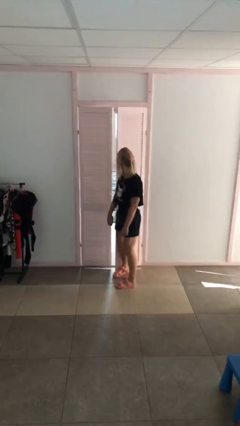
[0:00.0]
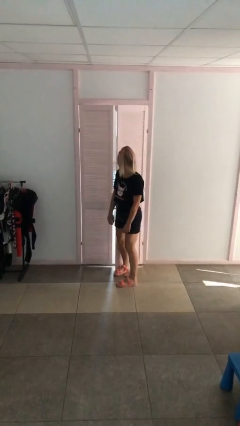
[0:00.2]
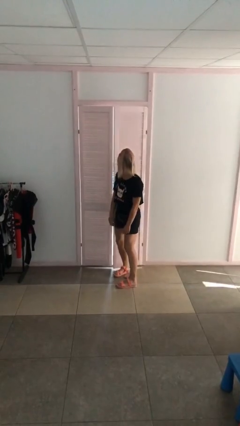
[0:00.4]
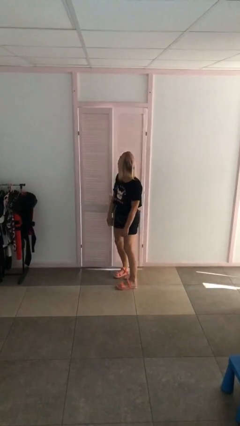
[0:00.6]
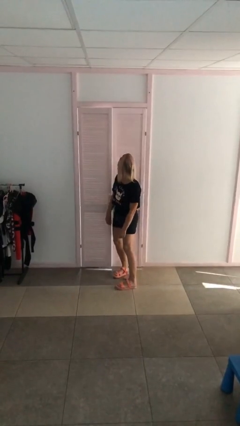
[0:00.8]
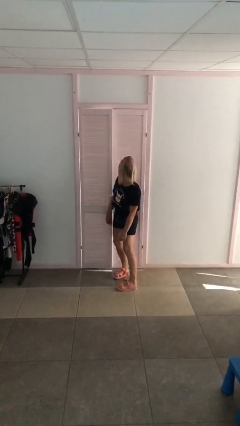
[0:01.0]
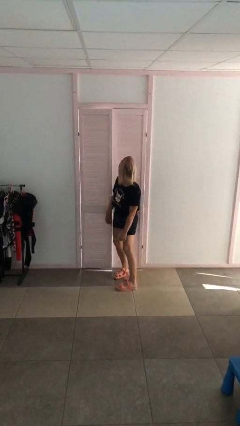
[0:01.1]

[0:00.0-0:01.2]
person closes door with hip

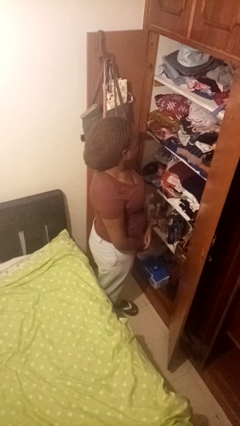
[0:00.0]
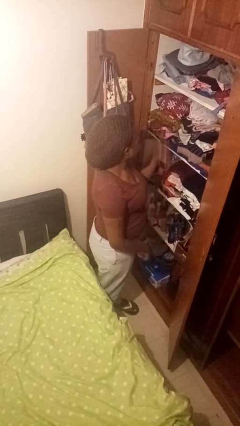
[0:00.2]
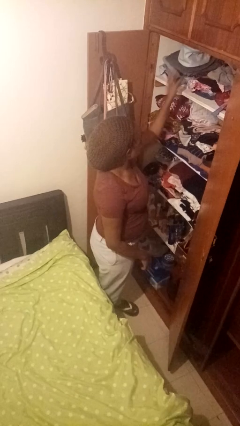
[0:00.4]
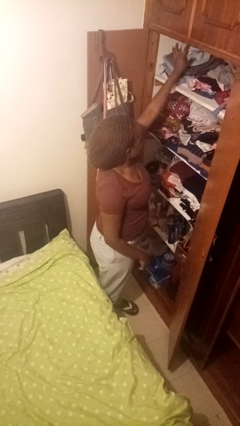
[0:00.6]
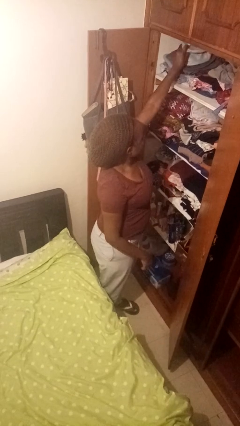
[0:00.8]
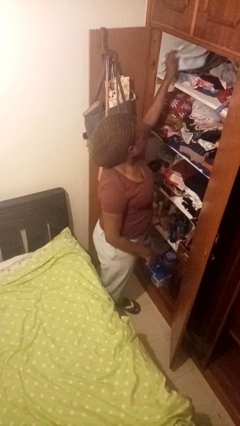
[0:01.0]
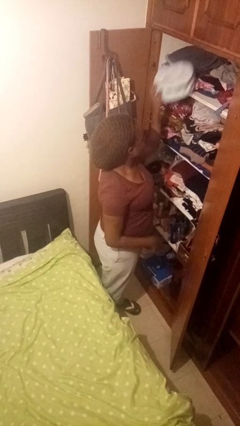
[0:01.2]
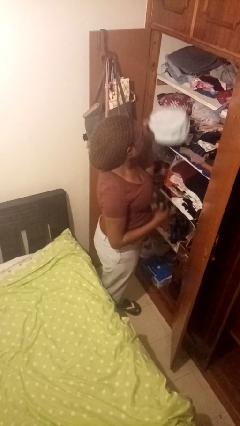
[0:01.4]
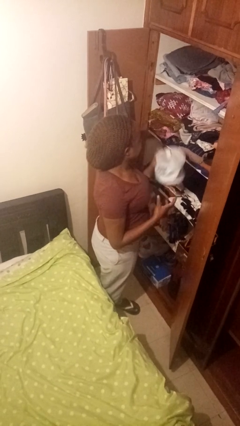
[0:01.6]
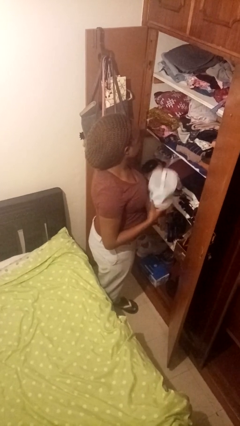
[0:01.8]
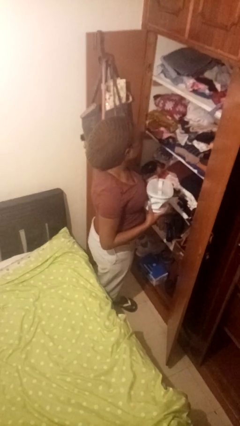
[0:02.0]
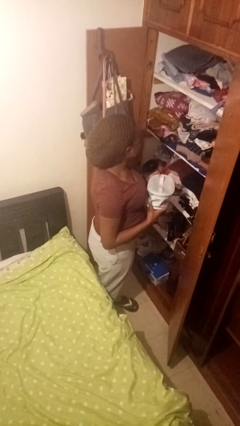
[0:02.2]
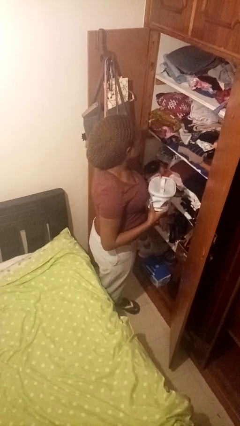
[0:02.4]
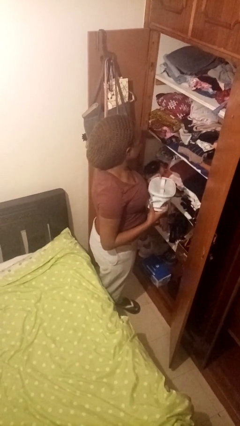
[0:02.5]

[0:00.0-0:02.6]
person picks up object from shelf

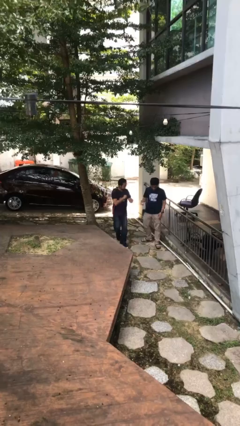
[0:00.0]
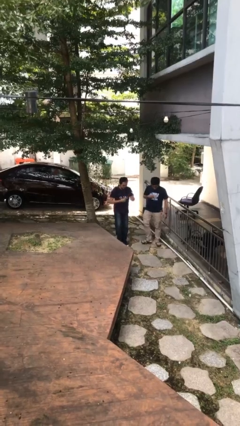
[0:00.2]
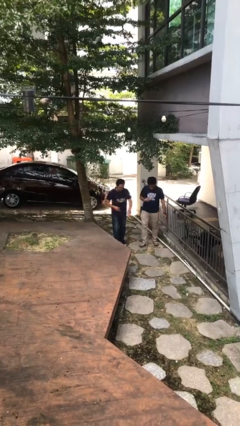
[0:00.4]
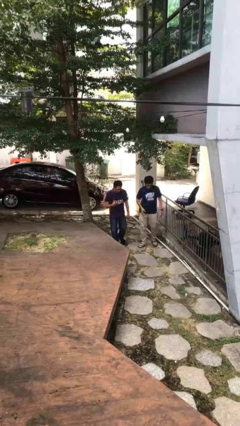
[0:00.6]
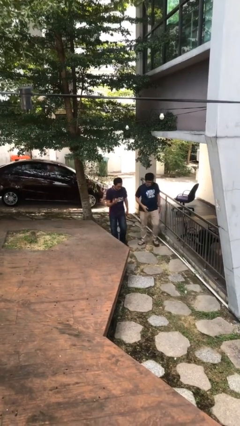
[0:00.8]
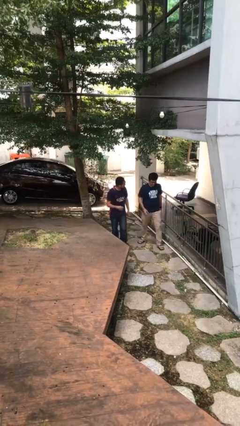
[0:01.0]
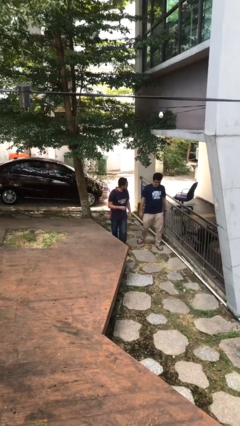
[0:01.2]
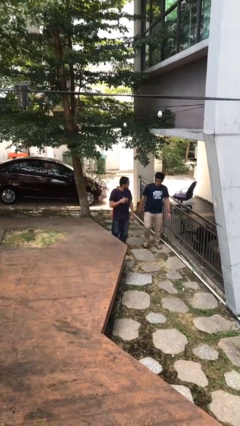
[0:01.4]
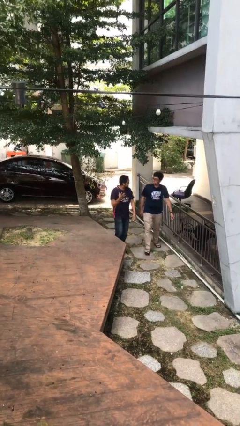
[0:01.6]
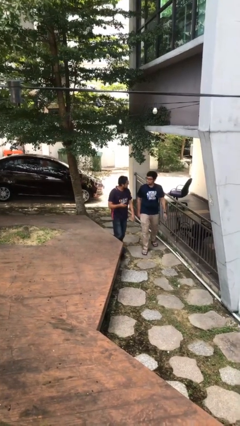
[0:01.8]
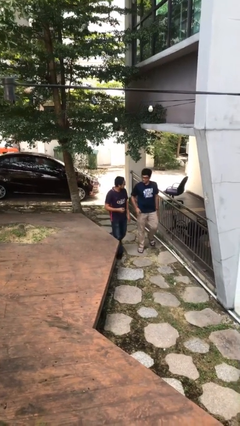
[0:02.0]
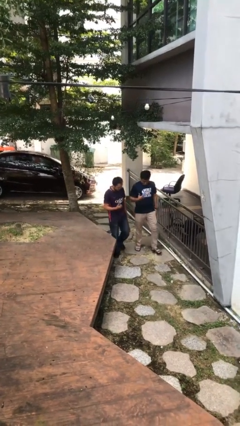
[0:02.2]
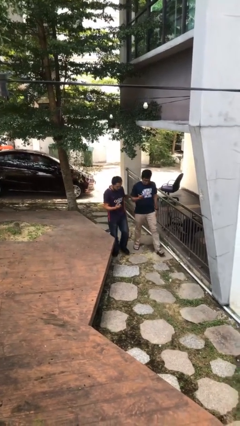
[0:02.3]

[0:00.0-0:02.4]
person talks to person

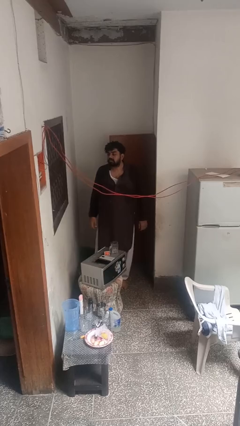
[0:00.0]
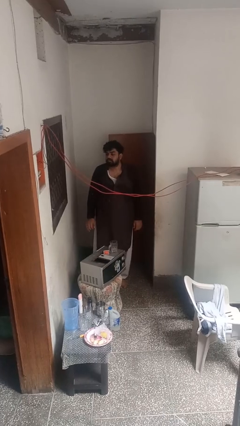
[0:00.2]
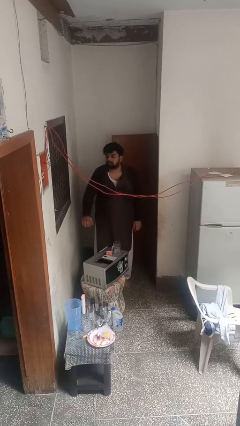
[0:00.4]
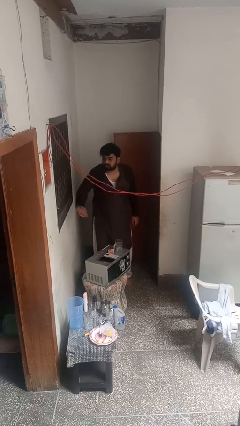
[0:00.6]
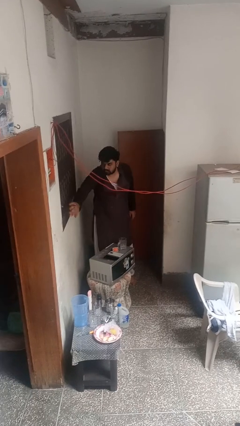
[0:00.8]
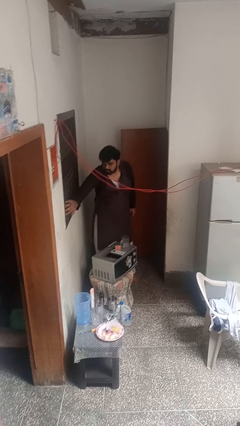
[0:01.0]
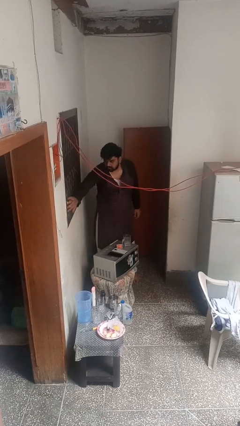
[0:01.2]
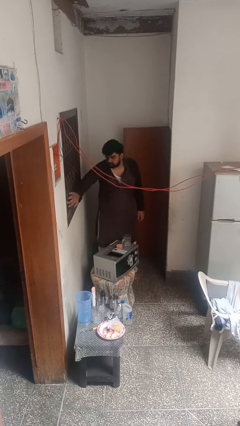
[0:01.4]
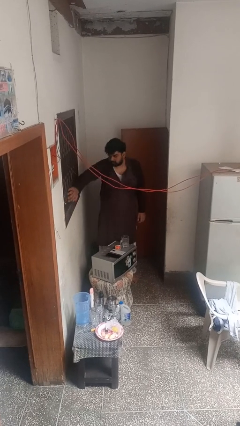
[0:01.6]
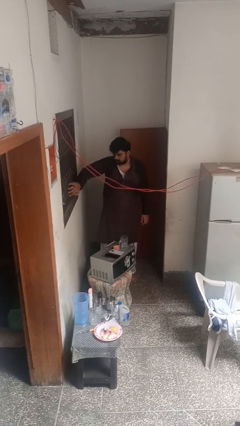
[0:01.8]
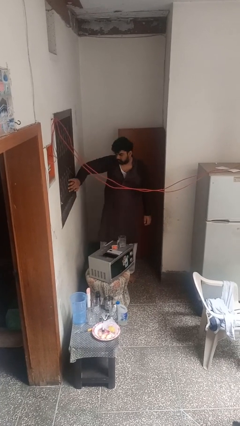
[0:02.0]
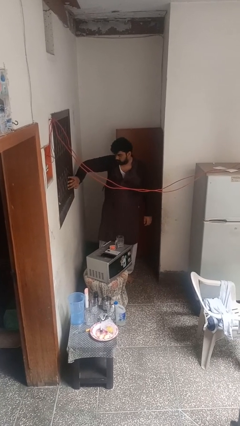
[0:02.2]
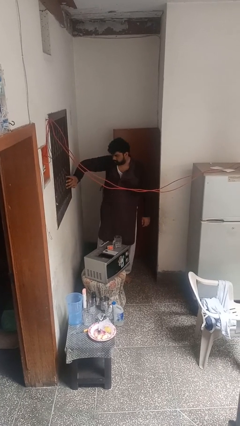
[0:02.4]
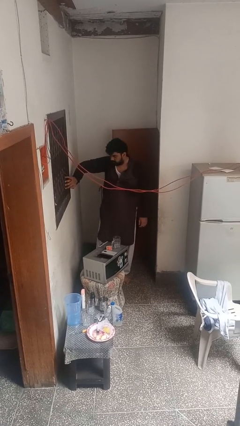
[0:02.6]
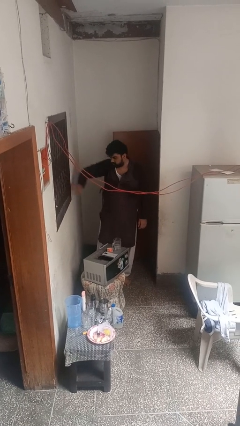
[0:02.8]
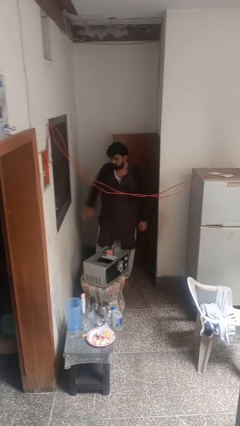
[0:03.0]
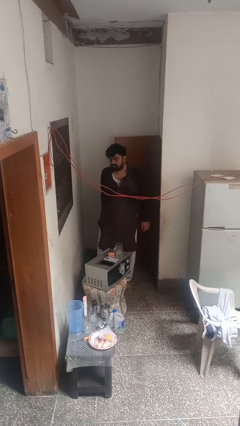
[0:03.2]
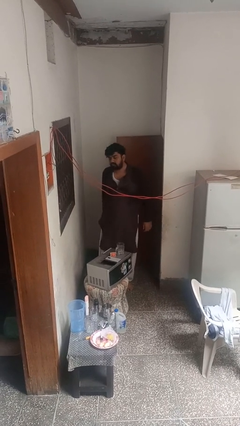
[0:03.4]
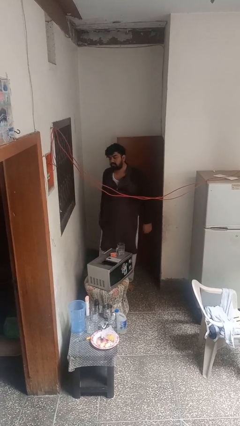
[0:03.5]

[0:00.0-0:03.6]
person closes home window

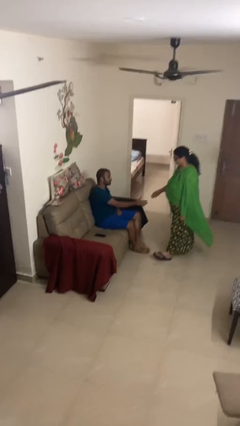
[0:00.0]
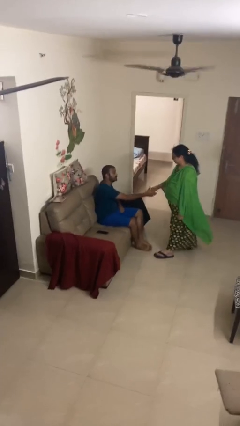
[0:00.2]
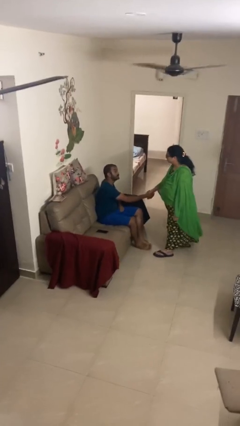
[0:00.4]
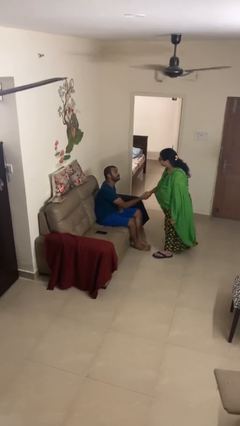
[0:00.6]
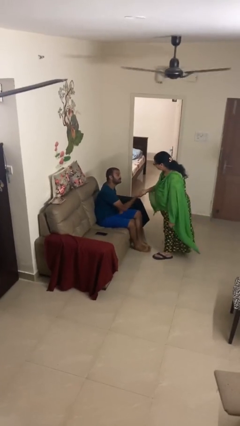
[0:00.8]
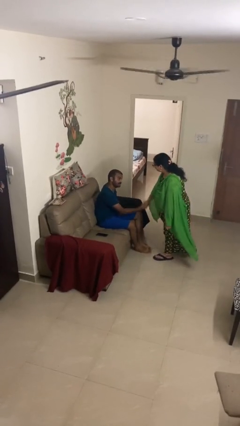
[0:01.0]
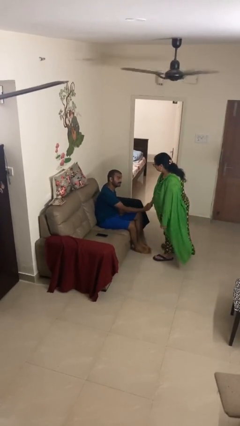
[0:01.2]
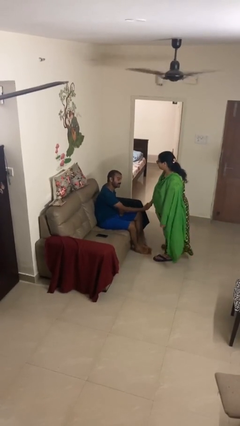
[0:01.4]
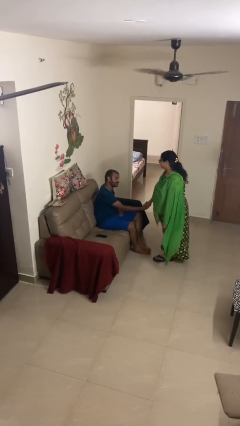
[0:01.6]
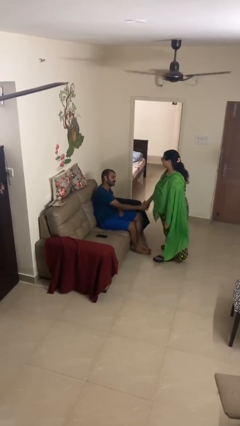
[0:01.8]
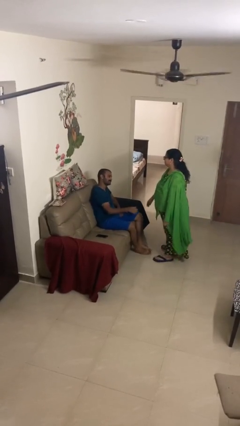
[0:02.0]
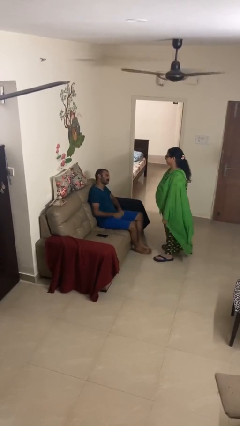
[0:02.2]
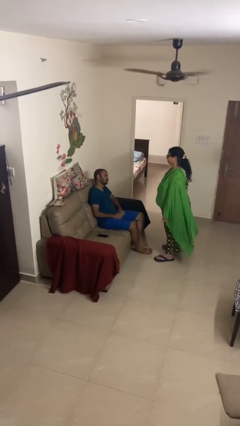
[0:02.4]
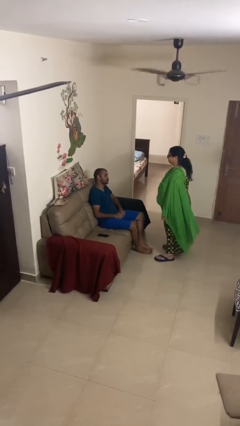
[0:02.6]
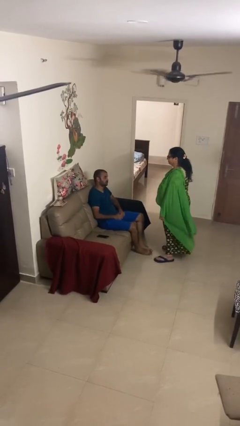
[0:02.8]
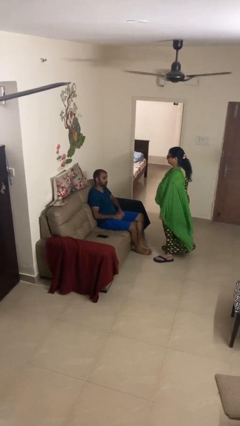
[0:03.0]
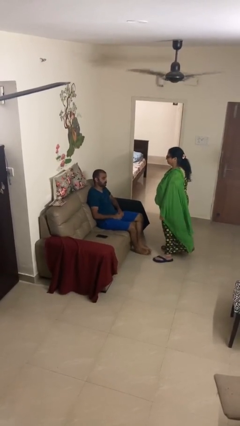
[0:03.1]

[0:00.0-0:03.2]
person shakes hand

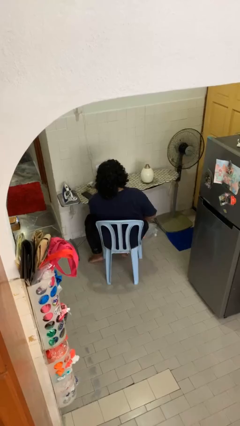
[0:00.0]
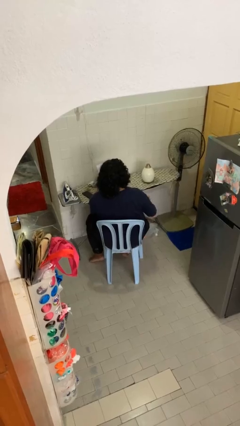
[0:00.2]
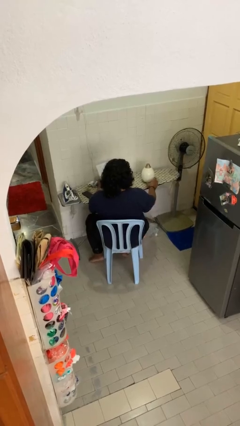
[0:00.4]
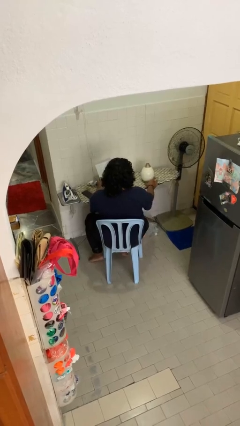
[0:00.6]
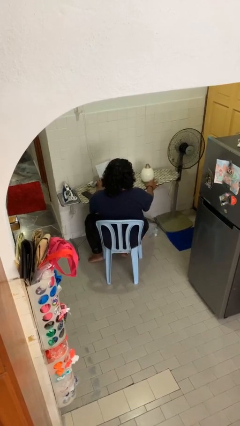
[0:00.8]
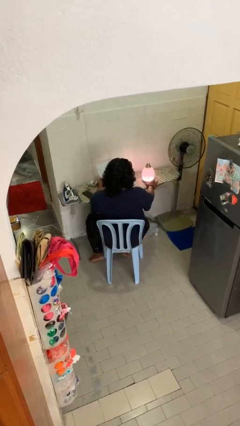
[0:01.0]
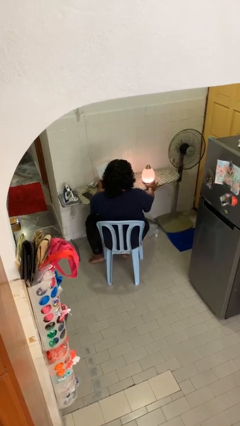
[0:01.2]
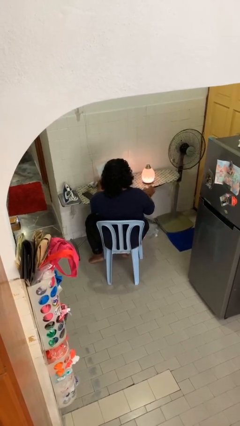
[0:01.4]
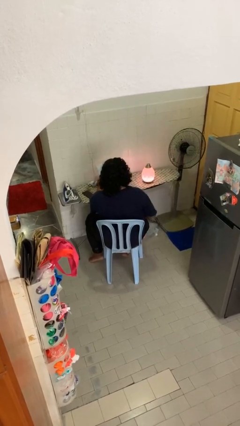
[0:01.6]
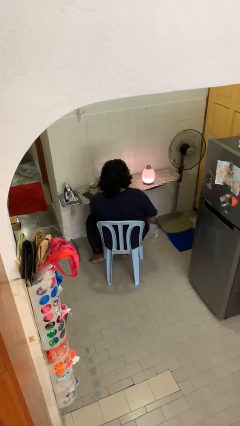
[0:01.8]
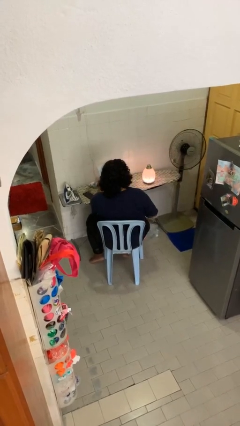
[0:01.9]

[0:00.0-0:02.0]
person turns on lamp

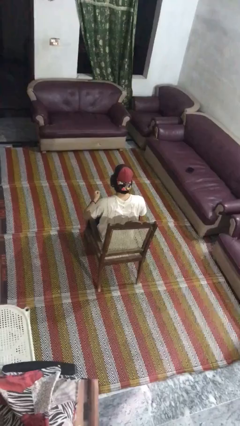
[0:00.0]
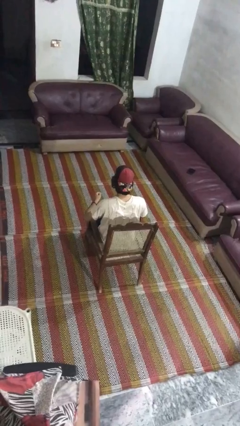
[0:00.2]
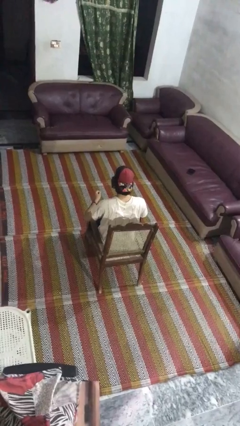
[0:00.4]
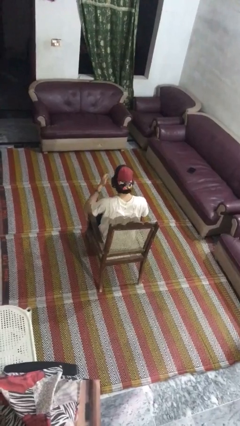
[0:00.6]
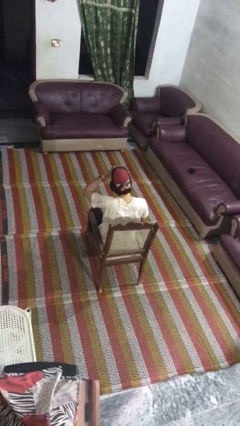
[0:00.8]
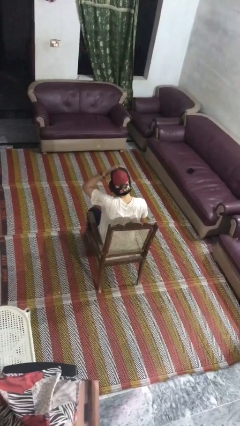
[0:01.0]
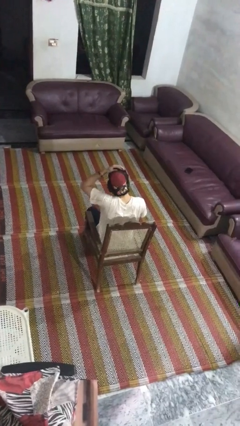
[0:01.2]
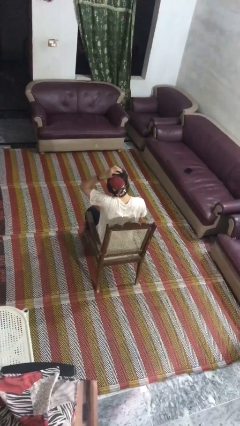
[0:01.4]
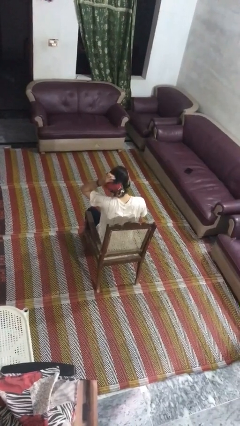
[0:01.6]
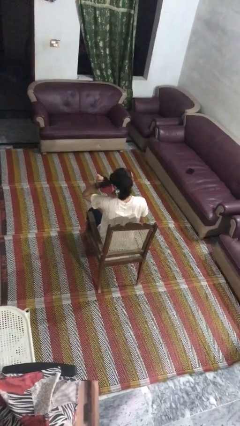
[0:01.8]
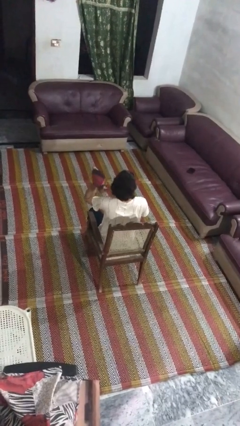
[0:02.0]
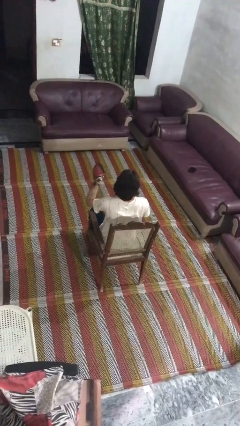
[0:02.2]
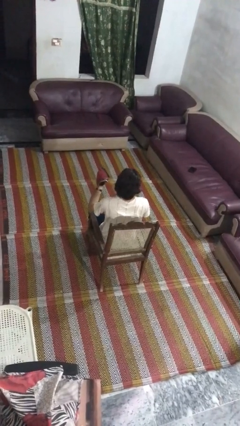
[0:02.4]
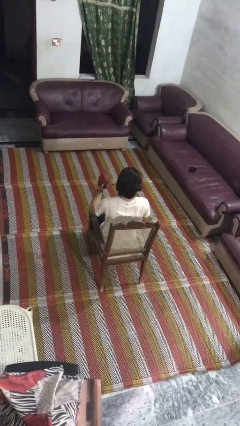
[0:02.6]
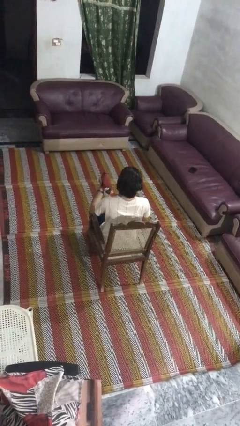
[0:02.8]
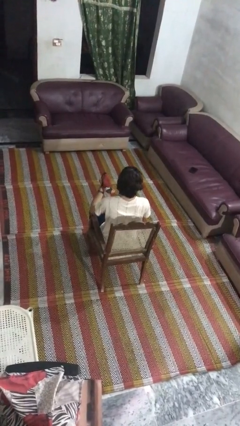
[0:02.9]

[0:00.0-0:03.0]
person takes off hat
